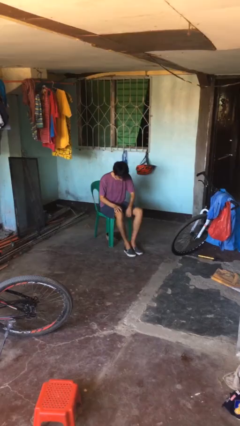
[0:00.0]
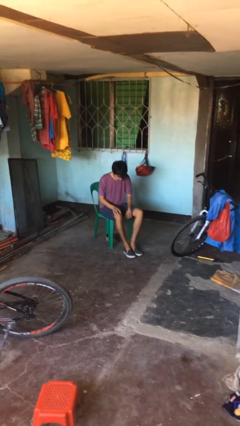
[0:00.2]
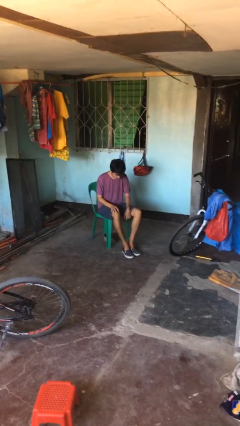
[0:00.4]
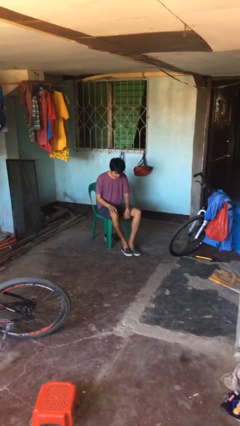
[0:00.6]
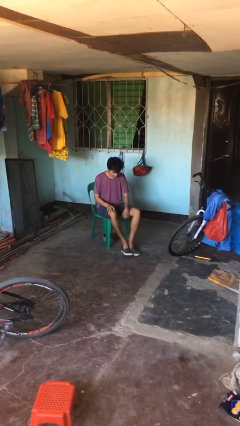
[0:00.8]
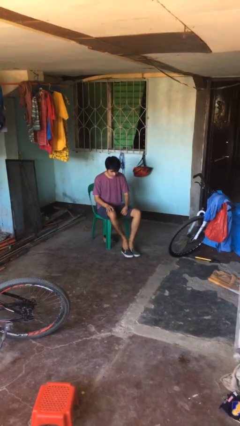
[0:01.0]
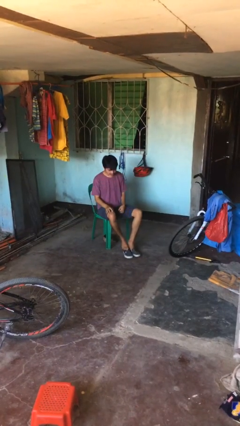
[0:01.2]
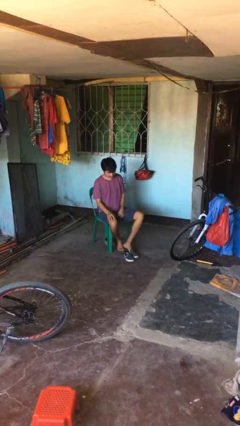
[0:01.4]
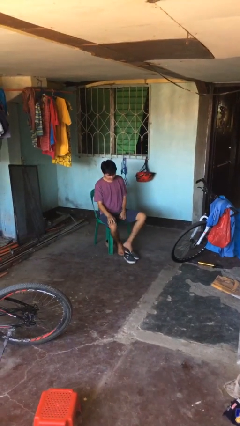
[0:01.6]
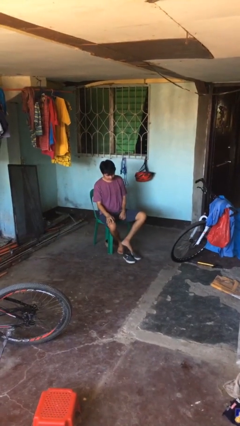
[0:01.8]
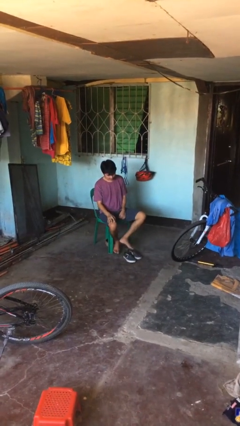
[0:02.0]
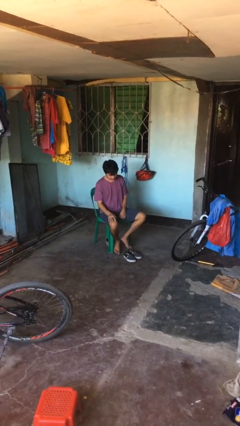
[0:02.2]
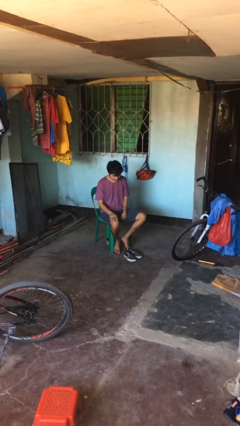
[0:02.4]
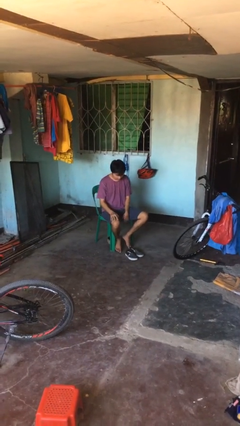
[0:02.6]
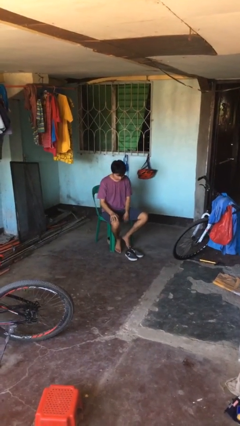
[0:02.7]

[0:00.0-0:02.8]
person takes off shoes

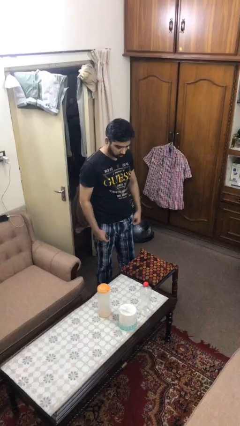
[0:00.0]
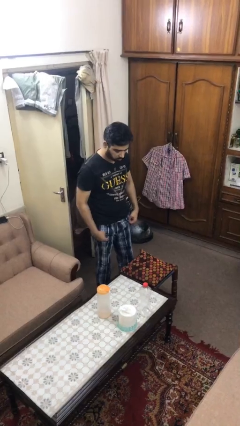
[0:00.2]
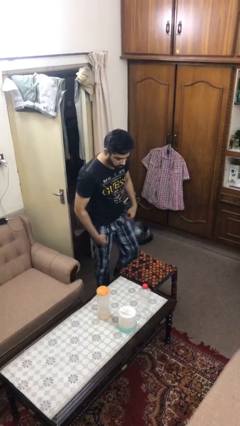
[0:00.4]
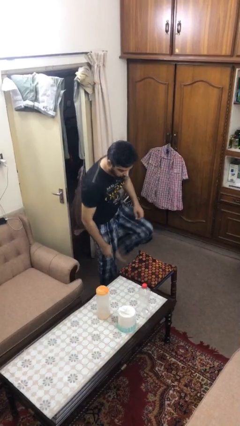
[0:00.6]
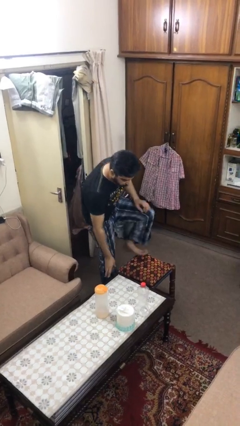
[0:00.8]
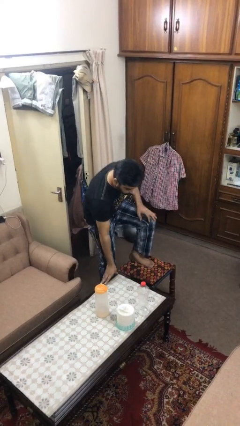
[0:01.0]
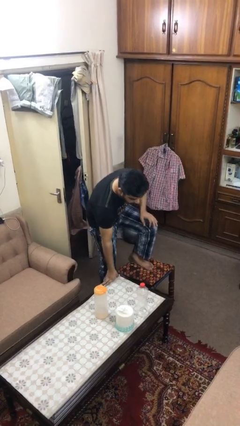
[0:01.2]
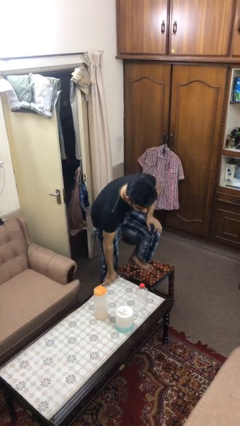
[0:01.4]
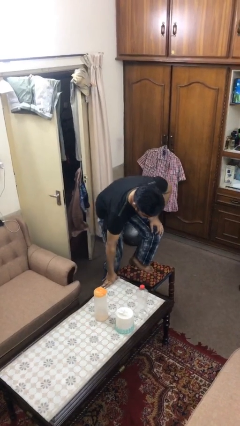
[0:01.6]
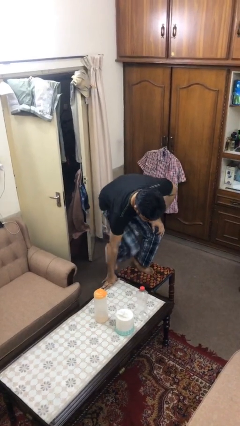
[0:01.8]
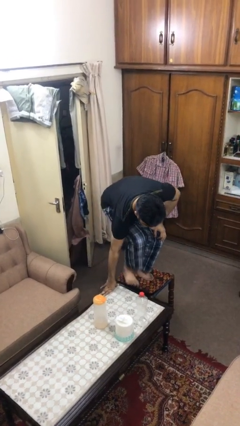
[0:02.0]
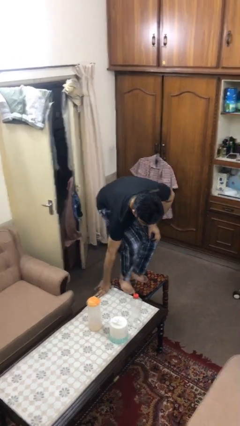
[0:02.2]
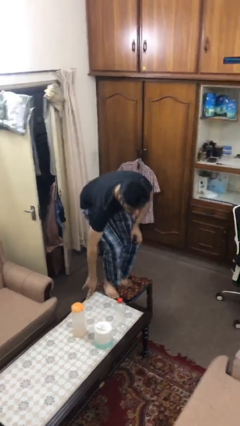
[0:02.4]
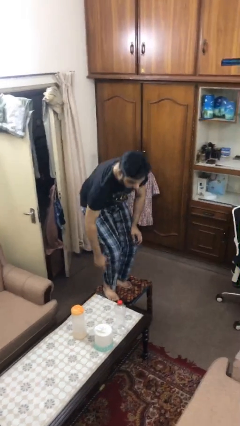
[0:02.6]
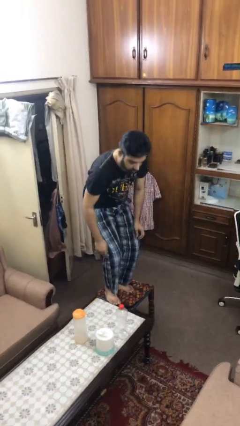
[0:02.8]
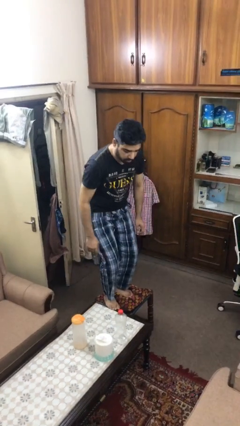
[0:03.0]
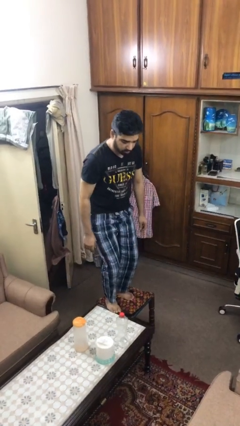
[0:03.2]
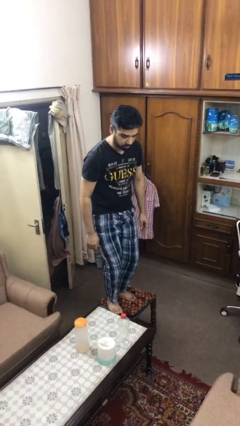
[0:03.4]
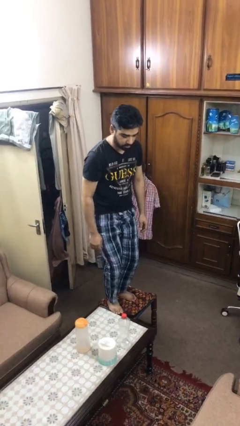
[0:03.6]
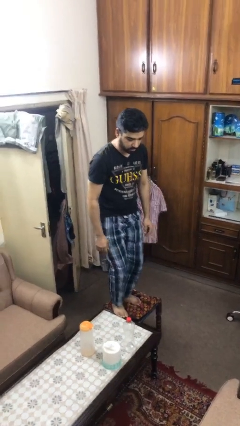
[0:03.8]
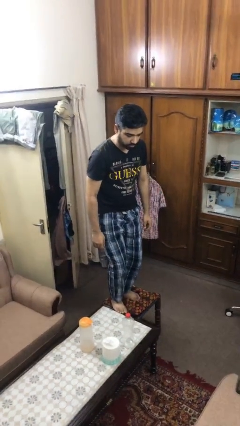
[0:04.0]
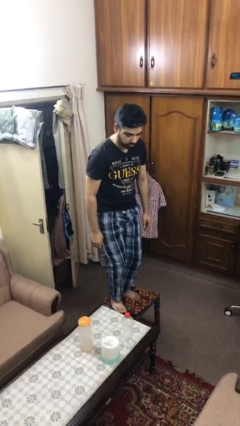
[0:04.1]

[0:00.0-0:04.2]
person climbs on table

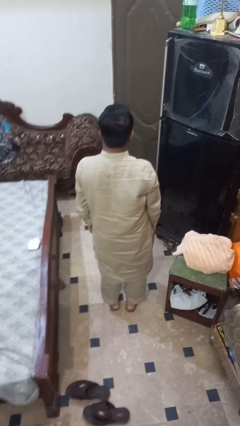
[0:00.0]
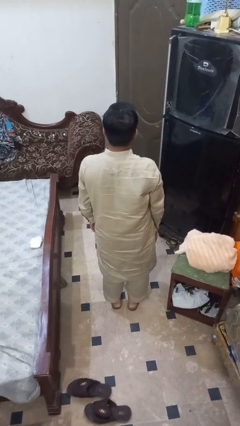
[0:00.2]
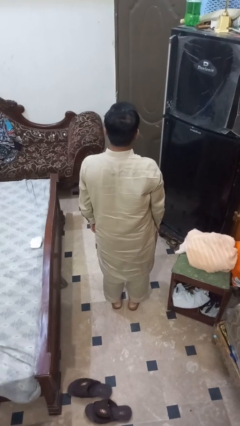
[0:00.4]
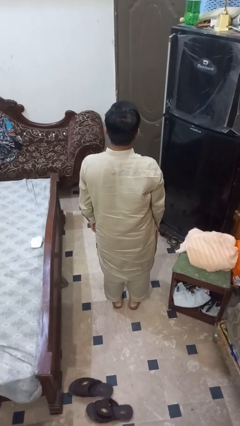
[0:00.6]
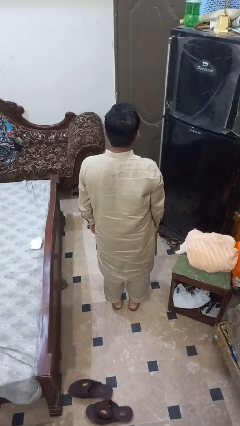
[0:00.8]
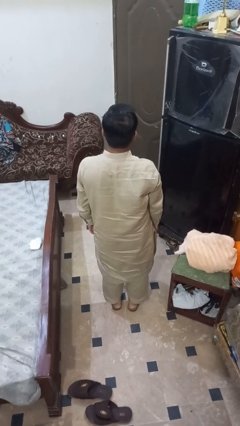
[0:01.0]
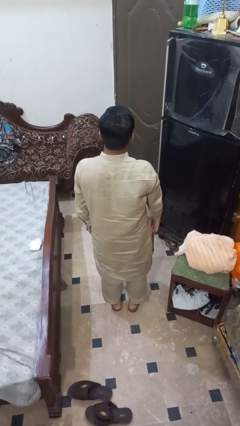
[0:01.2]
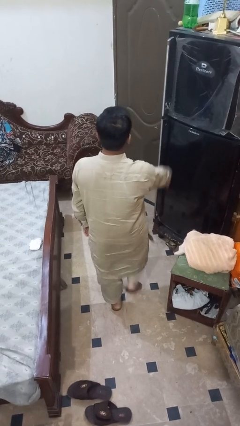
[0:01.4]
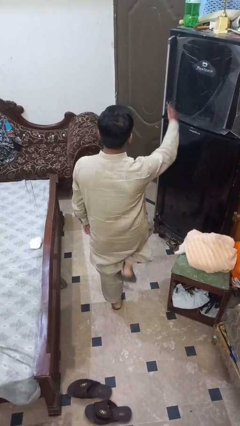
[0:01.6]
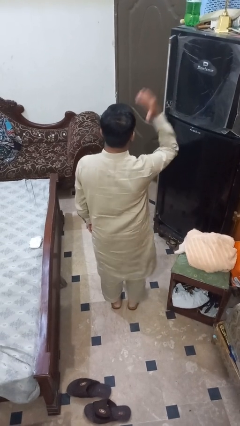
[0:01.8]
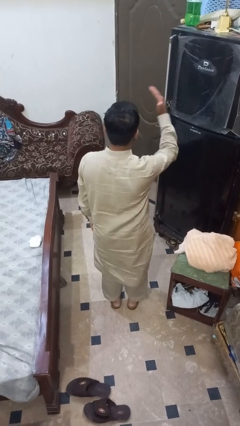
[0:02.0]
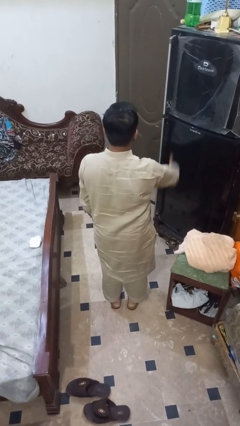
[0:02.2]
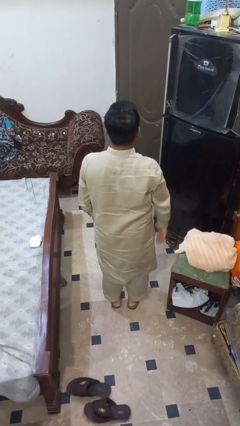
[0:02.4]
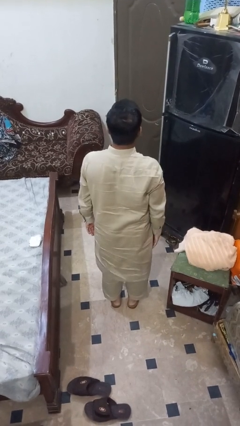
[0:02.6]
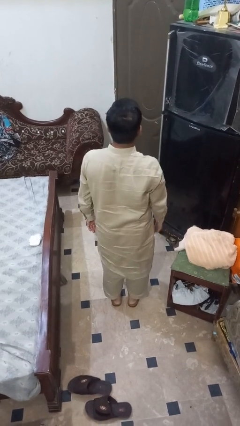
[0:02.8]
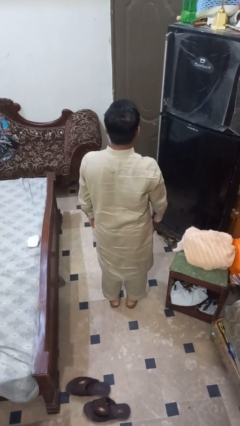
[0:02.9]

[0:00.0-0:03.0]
person salutes

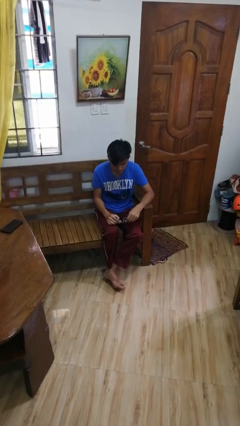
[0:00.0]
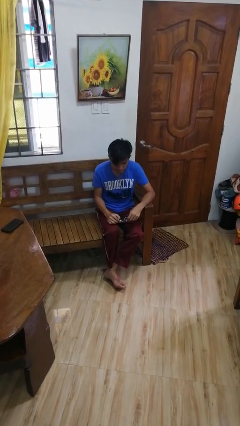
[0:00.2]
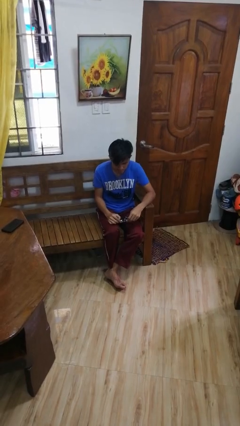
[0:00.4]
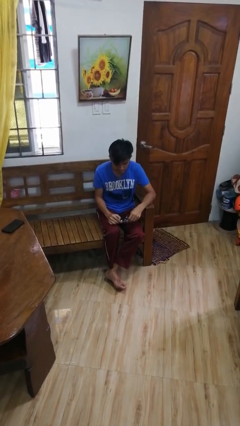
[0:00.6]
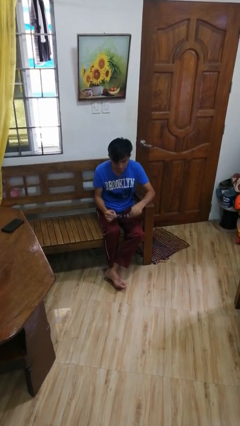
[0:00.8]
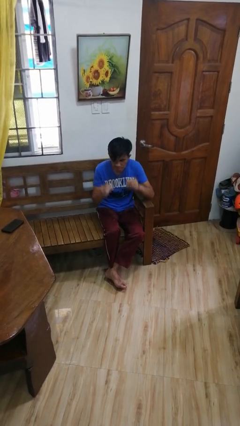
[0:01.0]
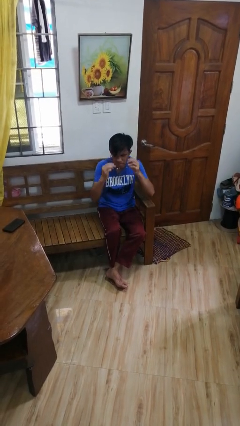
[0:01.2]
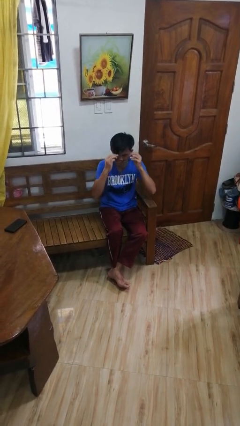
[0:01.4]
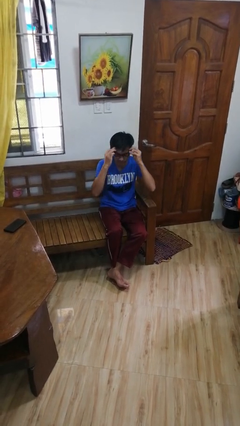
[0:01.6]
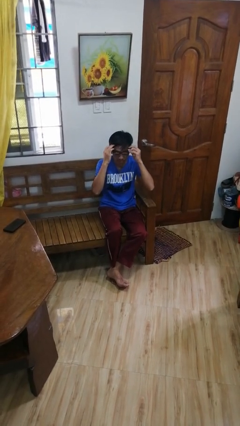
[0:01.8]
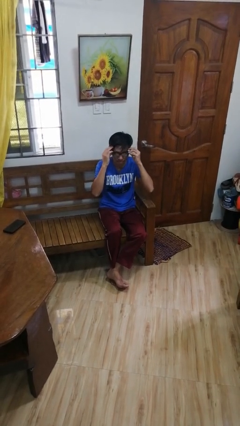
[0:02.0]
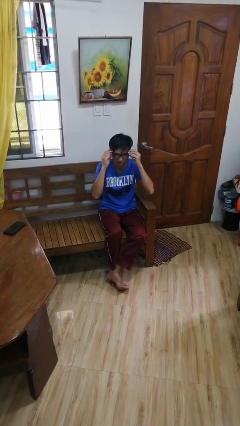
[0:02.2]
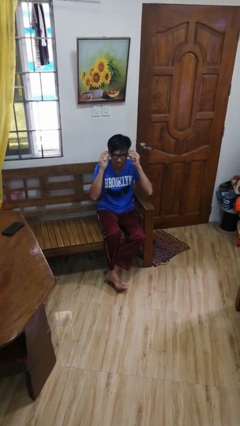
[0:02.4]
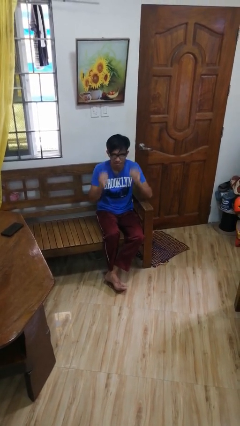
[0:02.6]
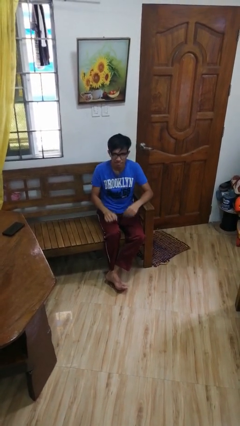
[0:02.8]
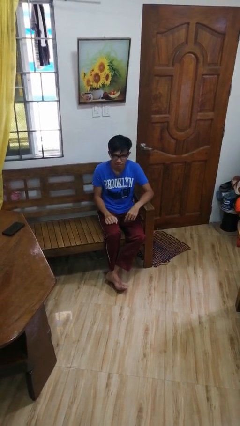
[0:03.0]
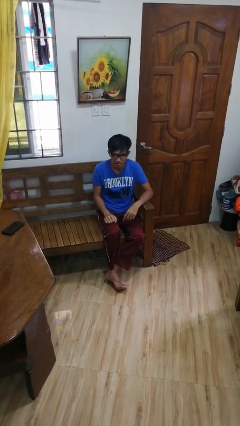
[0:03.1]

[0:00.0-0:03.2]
person puts on glasses

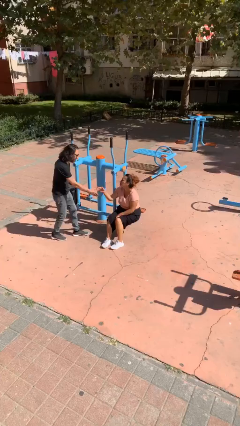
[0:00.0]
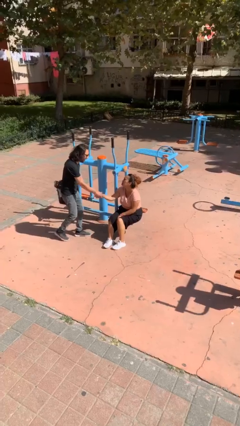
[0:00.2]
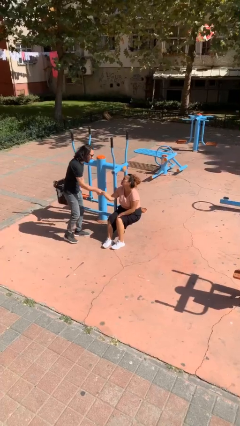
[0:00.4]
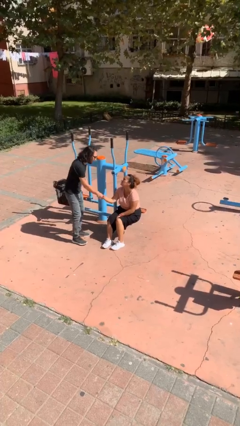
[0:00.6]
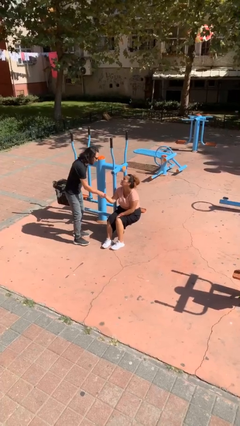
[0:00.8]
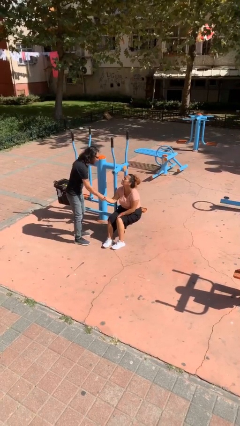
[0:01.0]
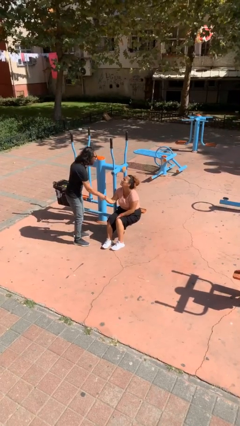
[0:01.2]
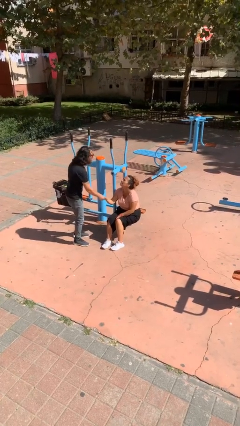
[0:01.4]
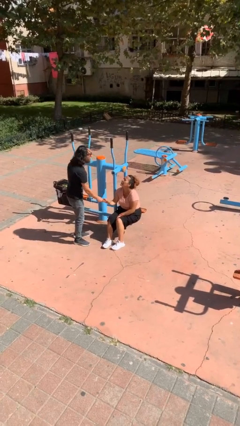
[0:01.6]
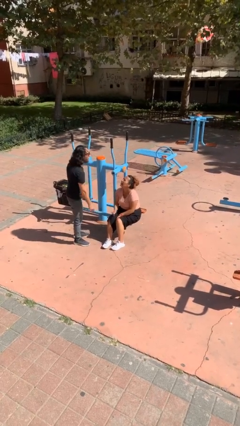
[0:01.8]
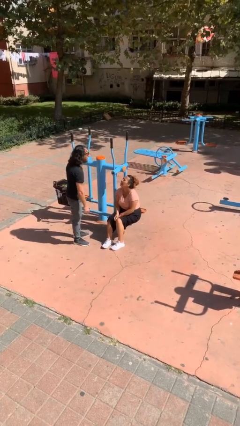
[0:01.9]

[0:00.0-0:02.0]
person shakes hand

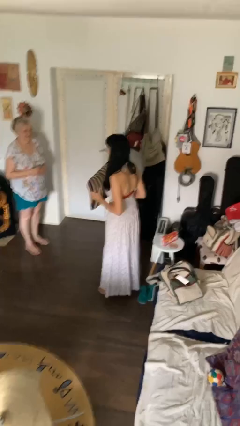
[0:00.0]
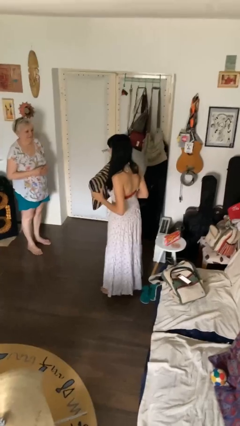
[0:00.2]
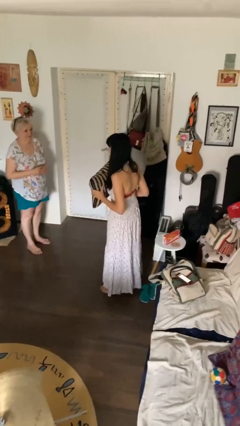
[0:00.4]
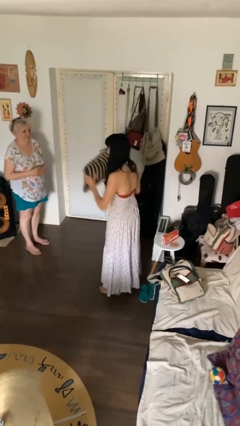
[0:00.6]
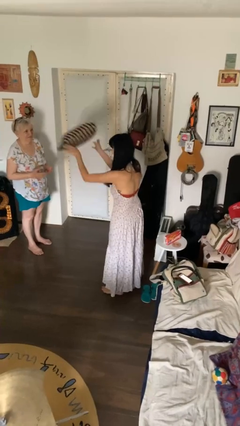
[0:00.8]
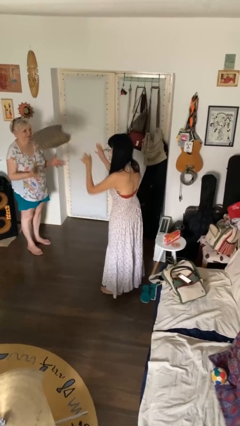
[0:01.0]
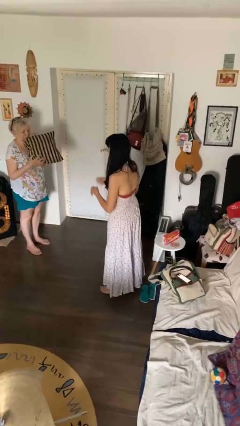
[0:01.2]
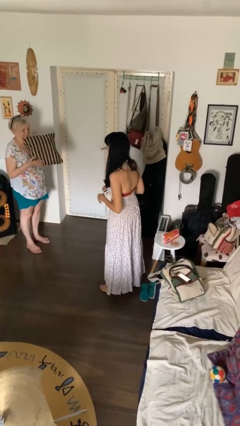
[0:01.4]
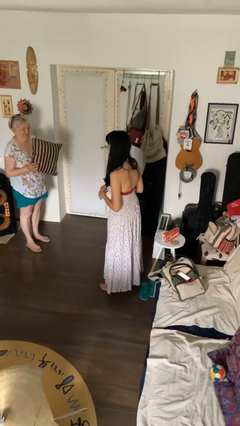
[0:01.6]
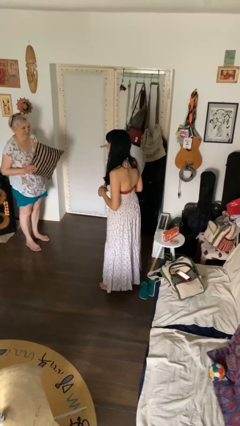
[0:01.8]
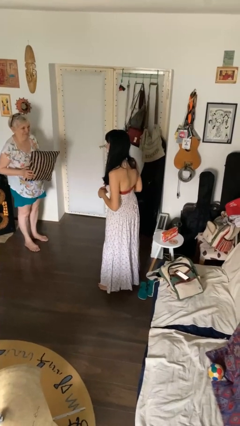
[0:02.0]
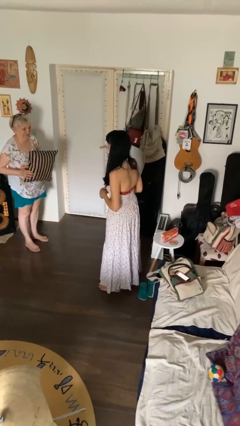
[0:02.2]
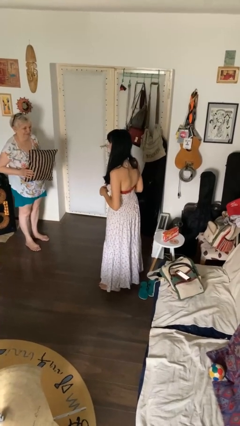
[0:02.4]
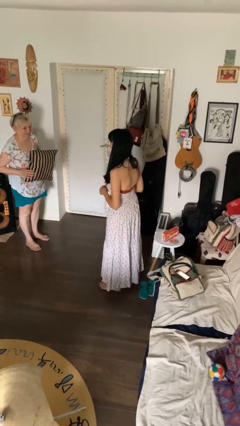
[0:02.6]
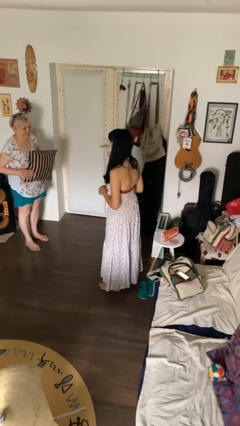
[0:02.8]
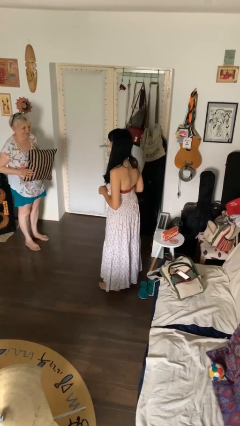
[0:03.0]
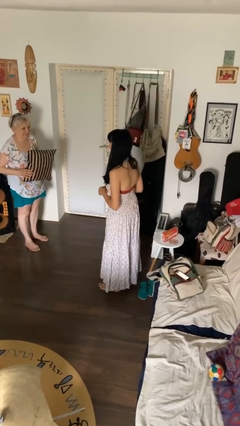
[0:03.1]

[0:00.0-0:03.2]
person throws object to person
